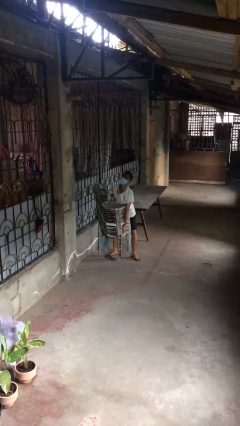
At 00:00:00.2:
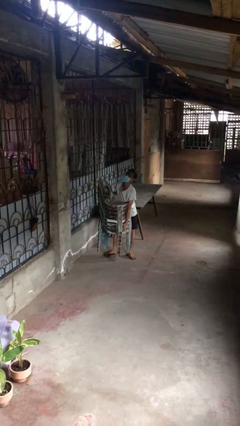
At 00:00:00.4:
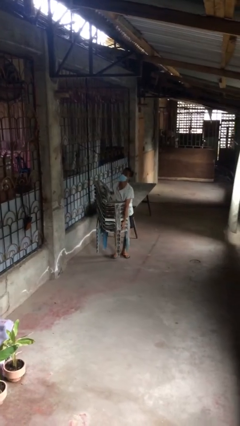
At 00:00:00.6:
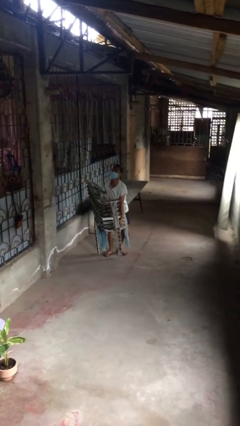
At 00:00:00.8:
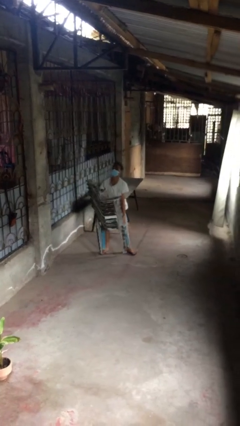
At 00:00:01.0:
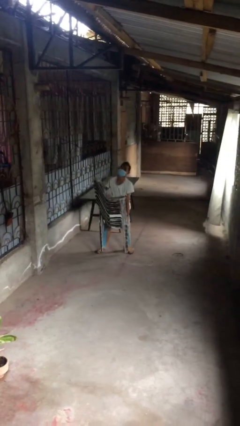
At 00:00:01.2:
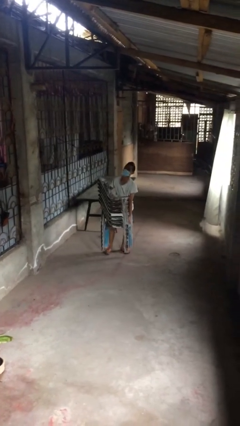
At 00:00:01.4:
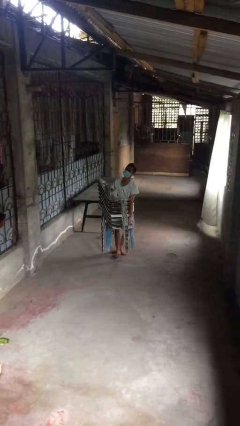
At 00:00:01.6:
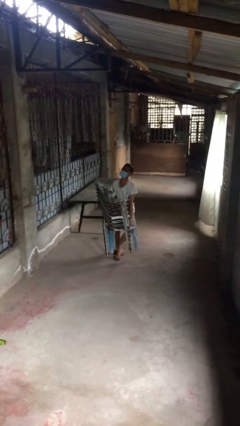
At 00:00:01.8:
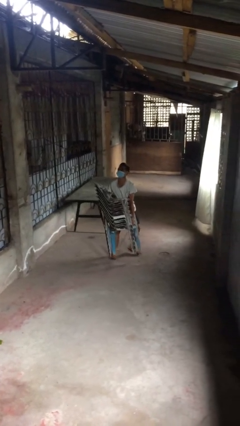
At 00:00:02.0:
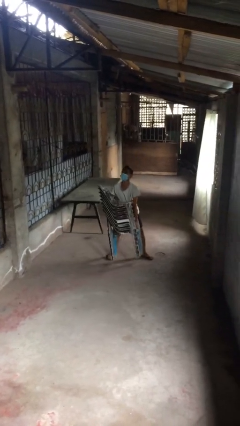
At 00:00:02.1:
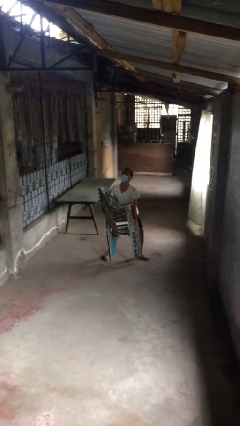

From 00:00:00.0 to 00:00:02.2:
person carries heavy object

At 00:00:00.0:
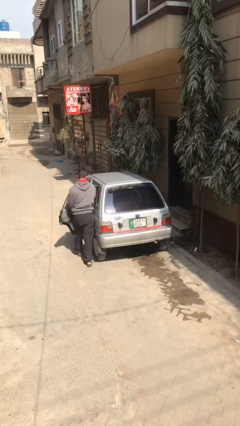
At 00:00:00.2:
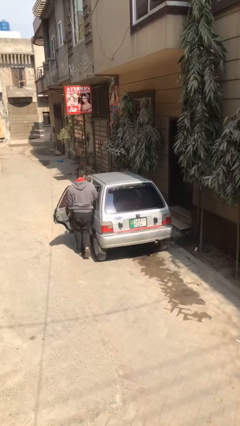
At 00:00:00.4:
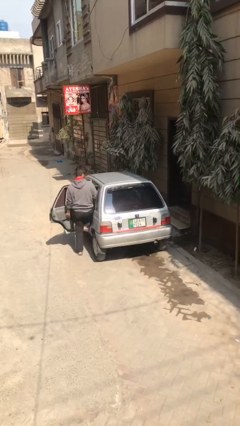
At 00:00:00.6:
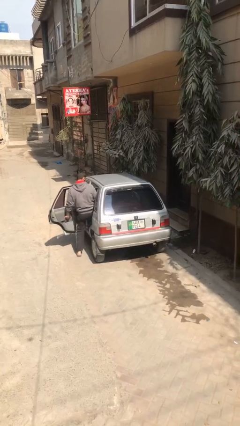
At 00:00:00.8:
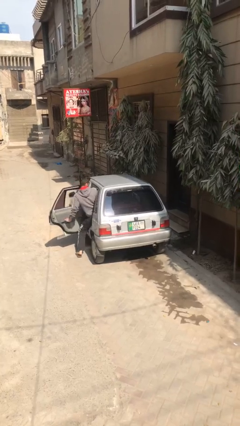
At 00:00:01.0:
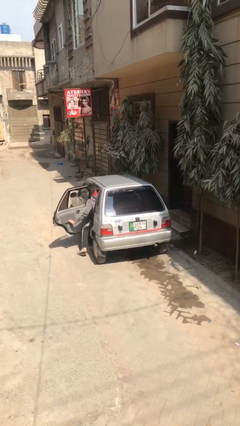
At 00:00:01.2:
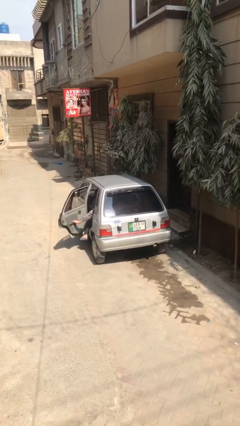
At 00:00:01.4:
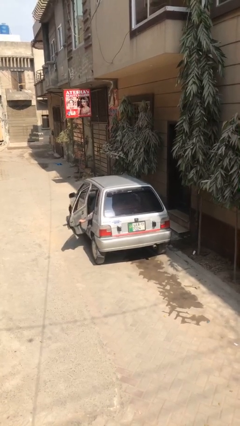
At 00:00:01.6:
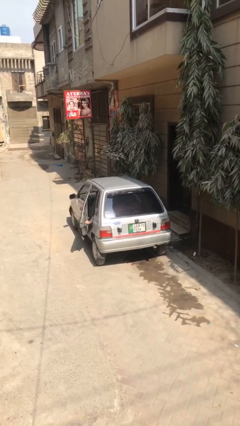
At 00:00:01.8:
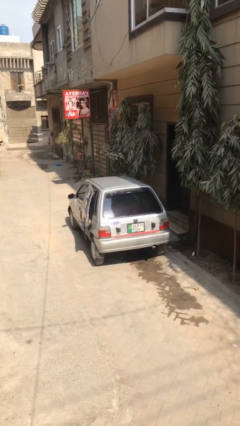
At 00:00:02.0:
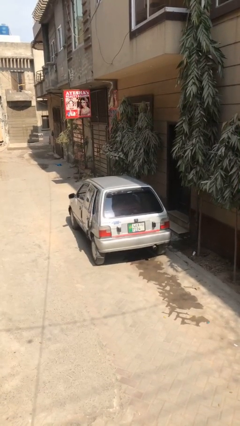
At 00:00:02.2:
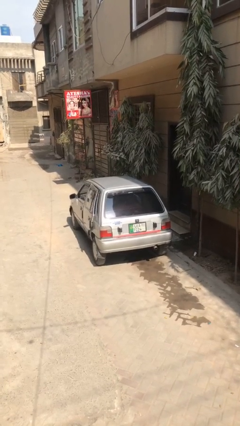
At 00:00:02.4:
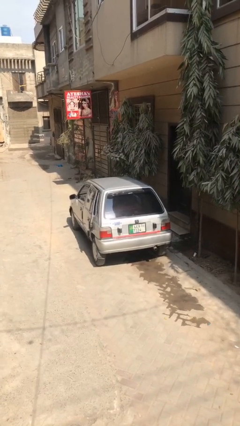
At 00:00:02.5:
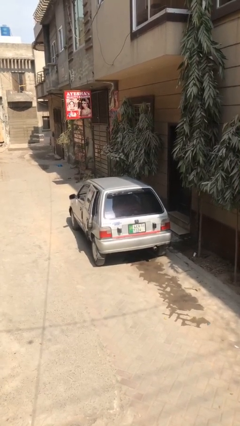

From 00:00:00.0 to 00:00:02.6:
car picks up person

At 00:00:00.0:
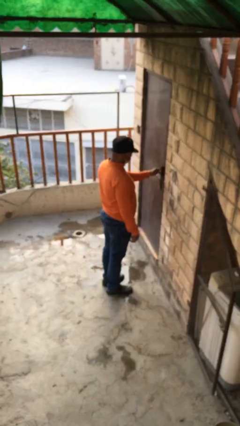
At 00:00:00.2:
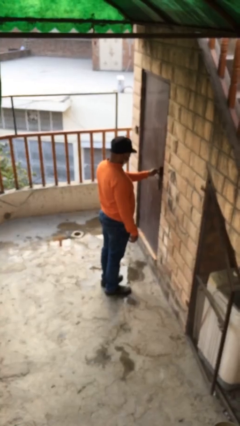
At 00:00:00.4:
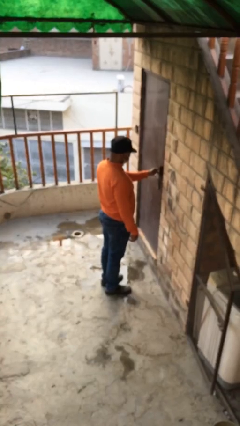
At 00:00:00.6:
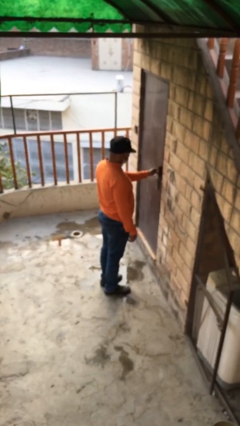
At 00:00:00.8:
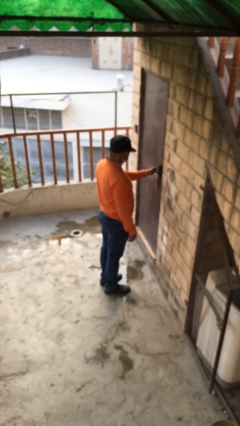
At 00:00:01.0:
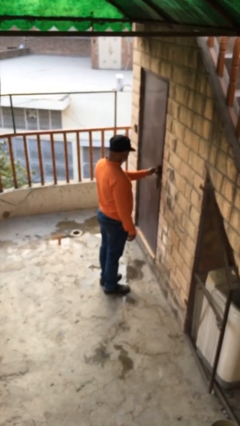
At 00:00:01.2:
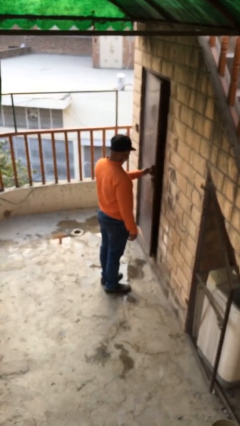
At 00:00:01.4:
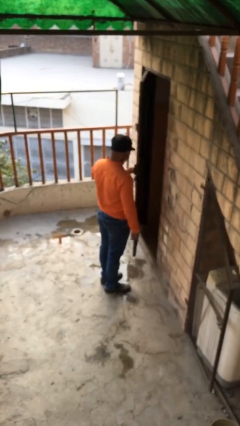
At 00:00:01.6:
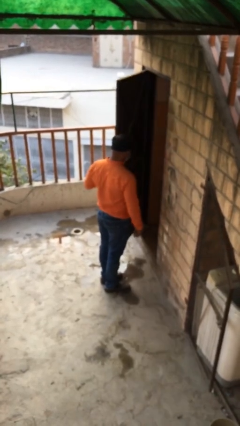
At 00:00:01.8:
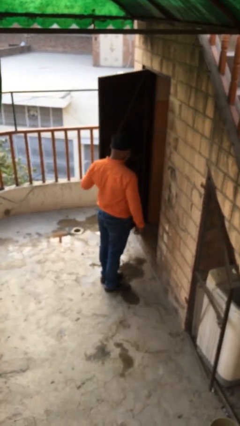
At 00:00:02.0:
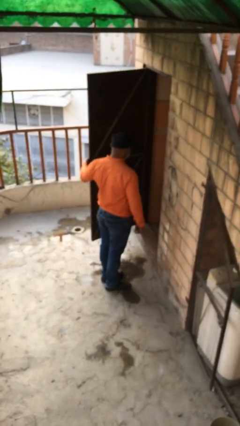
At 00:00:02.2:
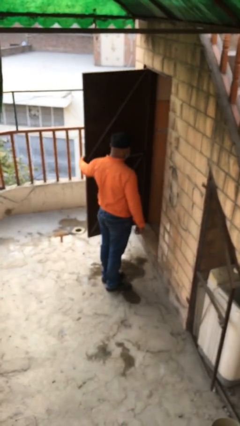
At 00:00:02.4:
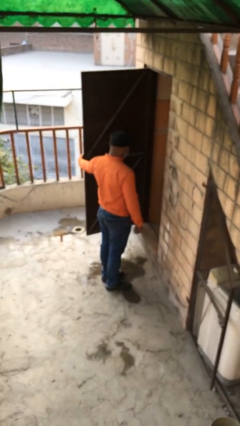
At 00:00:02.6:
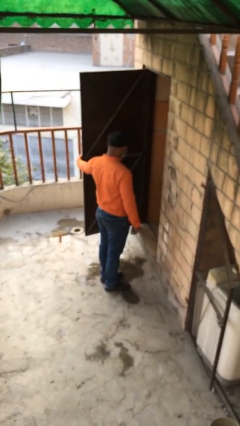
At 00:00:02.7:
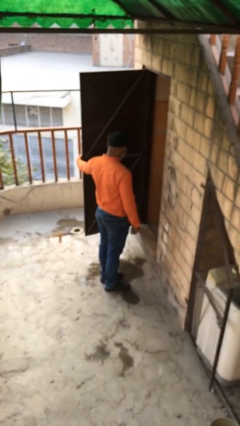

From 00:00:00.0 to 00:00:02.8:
person opens facility door

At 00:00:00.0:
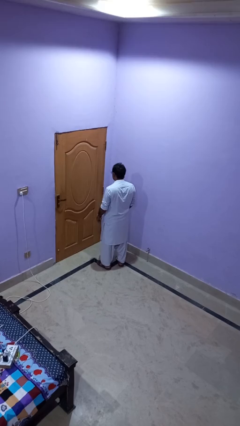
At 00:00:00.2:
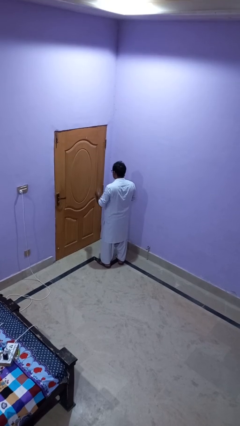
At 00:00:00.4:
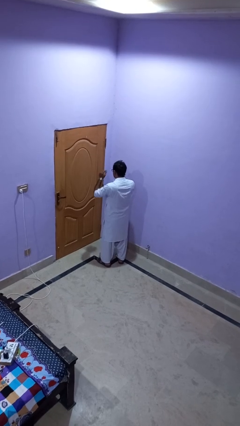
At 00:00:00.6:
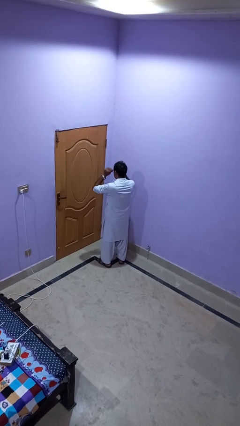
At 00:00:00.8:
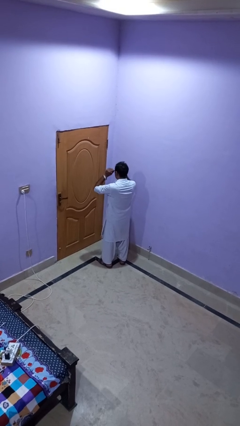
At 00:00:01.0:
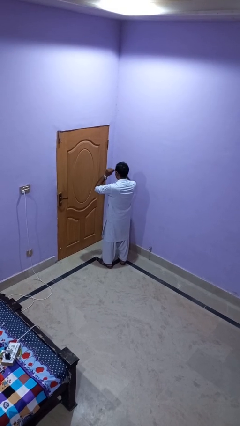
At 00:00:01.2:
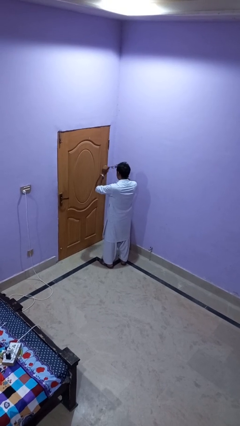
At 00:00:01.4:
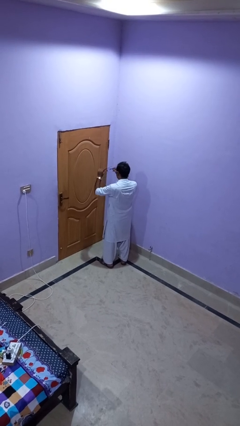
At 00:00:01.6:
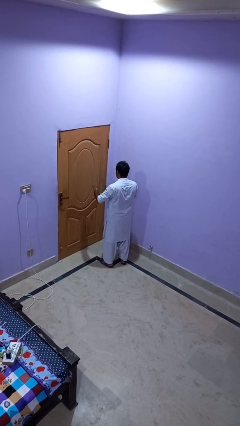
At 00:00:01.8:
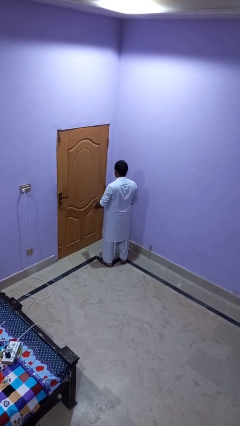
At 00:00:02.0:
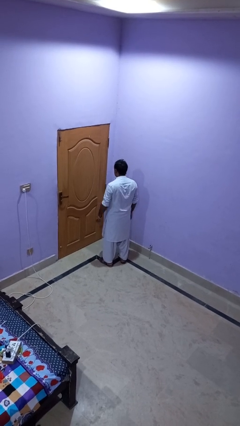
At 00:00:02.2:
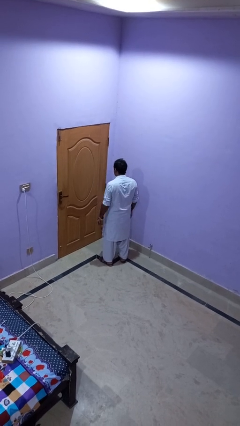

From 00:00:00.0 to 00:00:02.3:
person takes off glasses

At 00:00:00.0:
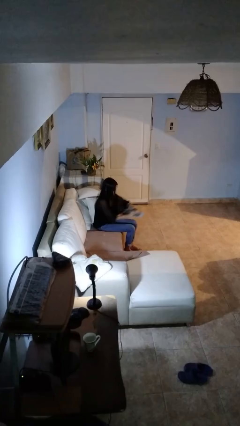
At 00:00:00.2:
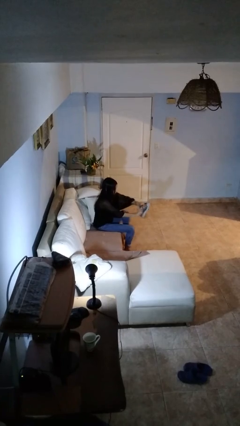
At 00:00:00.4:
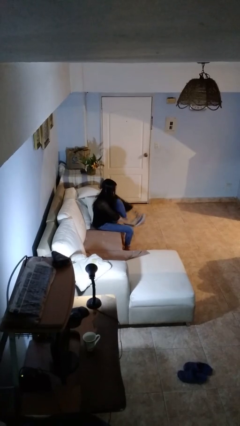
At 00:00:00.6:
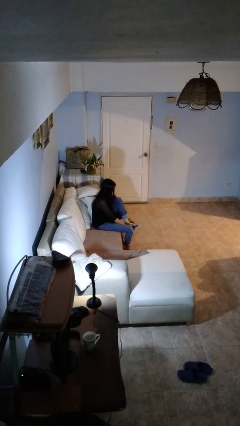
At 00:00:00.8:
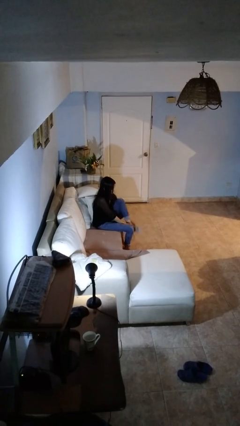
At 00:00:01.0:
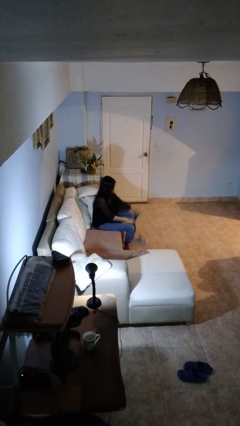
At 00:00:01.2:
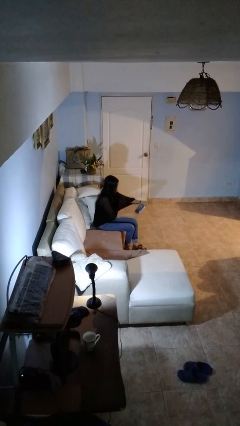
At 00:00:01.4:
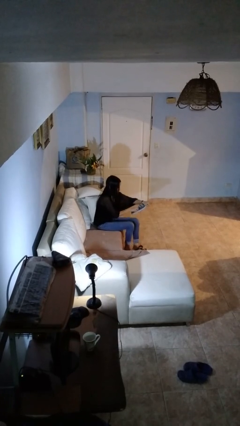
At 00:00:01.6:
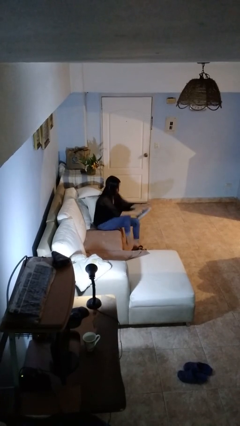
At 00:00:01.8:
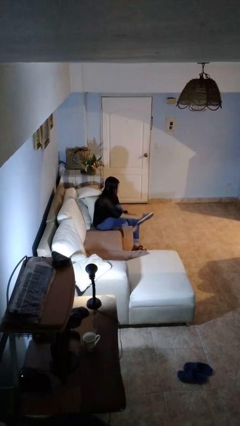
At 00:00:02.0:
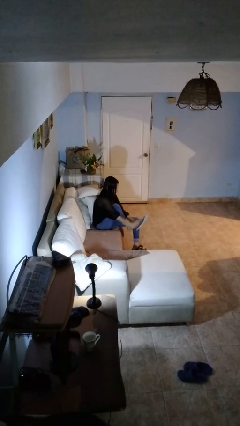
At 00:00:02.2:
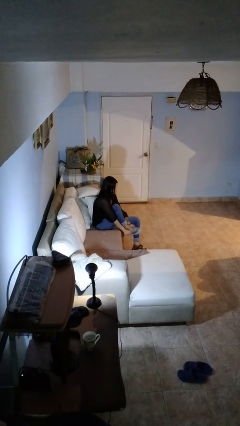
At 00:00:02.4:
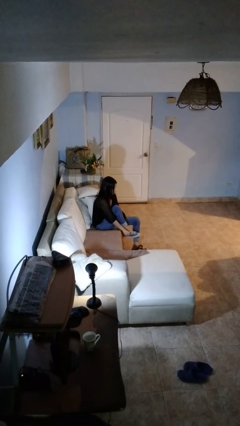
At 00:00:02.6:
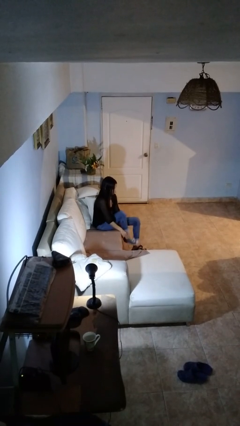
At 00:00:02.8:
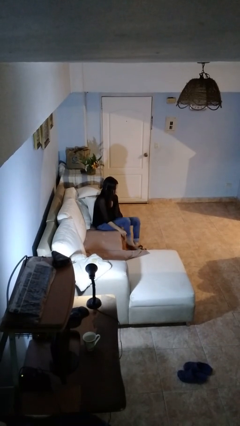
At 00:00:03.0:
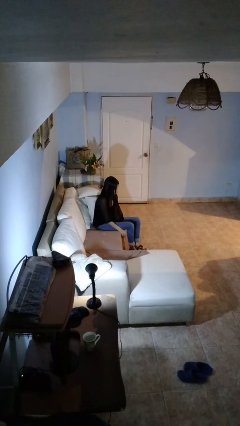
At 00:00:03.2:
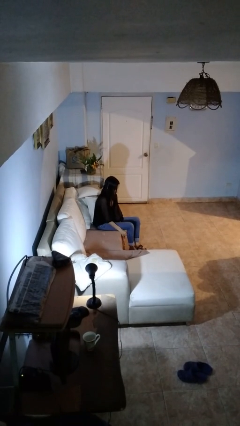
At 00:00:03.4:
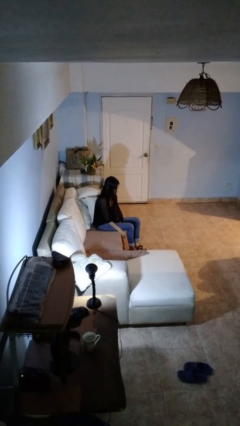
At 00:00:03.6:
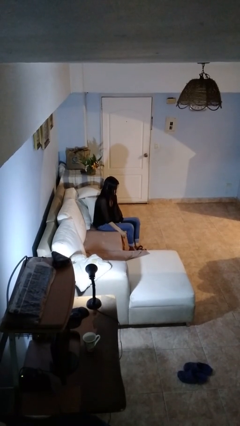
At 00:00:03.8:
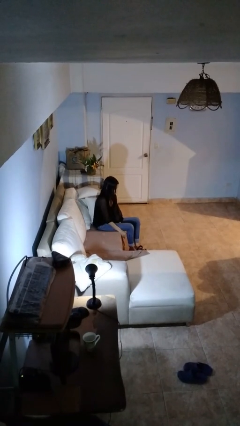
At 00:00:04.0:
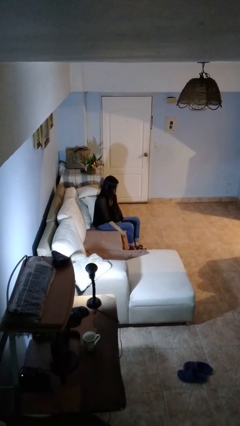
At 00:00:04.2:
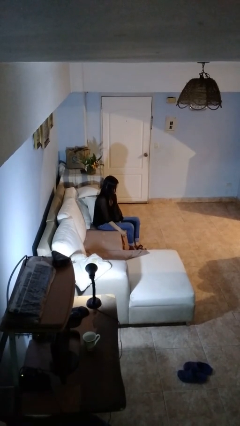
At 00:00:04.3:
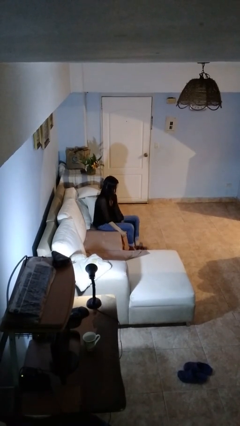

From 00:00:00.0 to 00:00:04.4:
person puts on shoes

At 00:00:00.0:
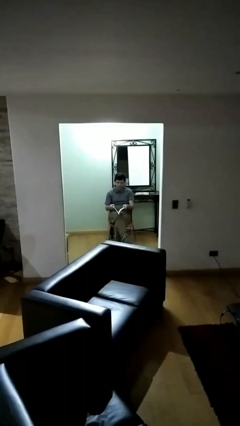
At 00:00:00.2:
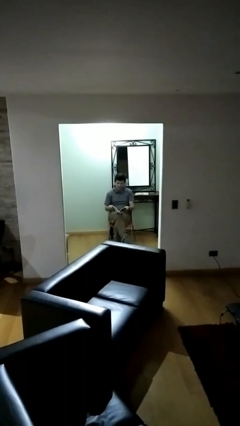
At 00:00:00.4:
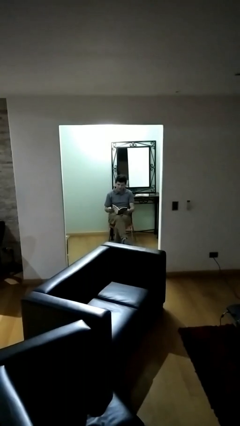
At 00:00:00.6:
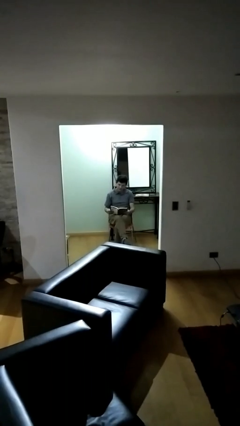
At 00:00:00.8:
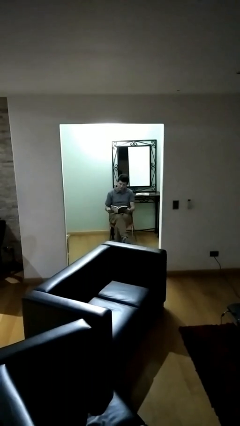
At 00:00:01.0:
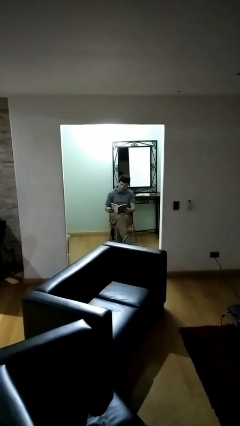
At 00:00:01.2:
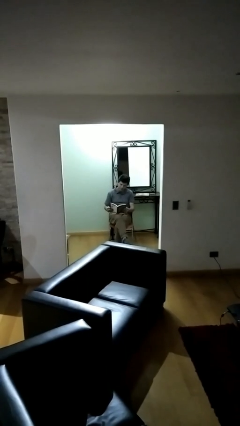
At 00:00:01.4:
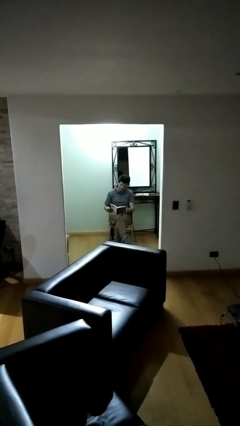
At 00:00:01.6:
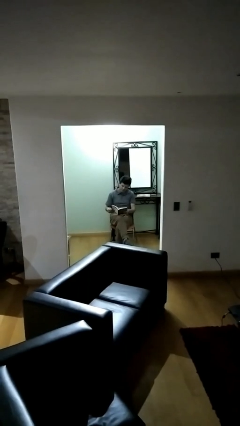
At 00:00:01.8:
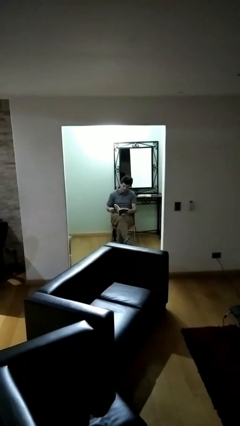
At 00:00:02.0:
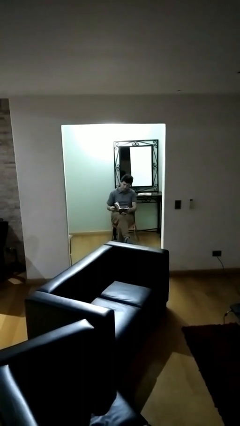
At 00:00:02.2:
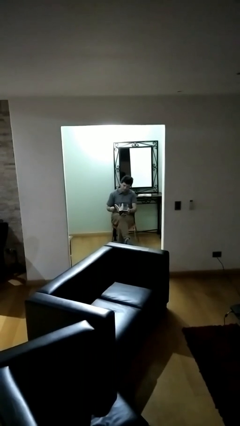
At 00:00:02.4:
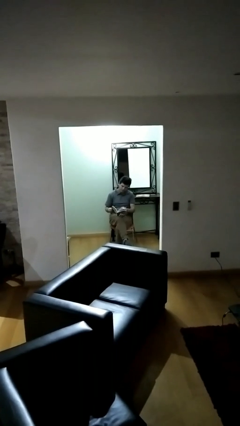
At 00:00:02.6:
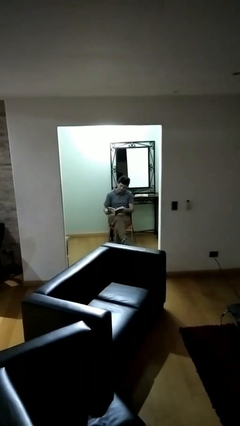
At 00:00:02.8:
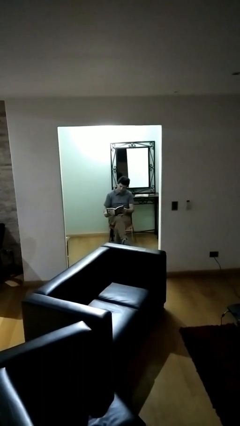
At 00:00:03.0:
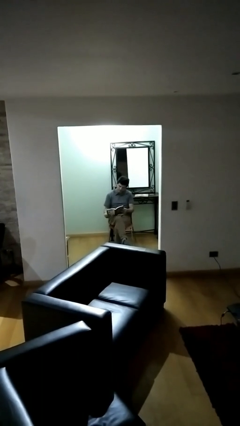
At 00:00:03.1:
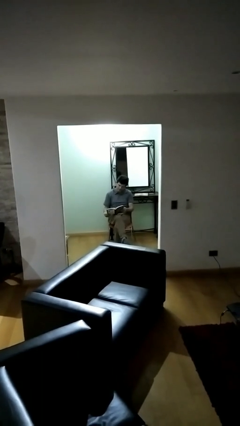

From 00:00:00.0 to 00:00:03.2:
person reads document
